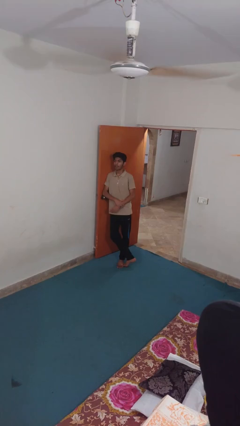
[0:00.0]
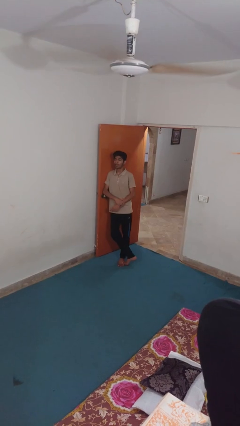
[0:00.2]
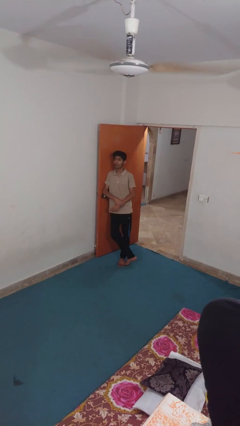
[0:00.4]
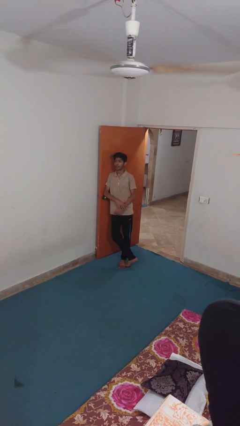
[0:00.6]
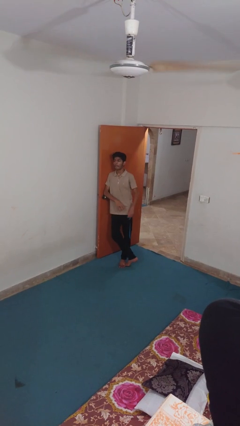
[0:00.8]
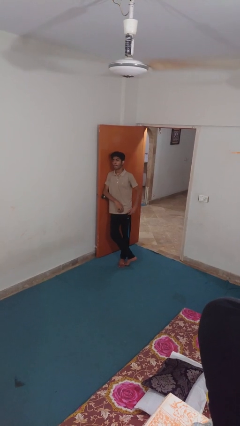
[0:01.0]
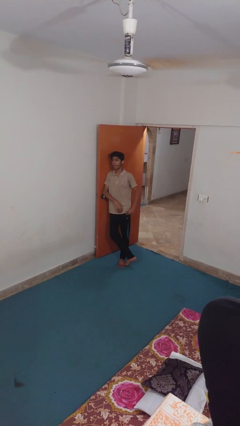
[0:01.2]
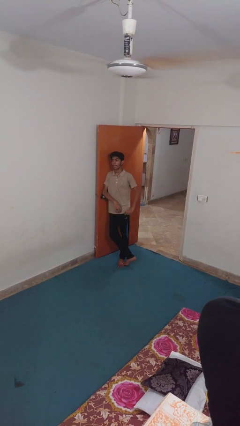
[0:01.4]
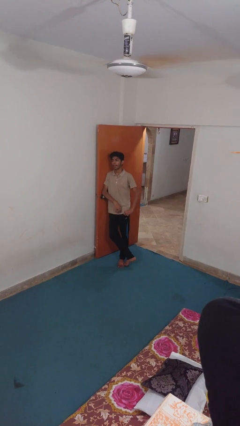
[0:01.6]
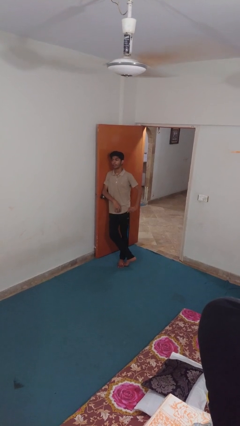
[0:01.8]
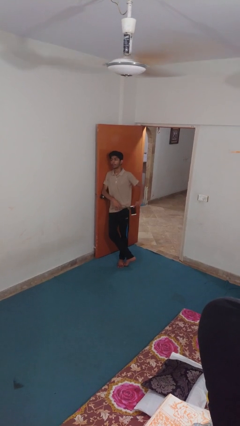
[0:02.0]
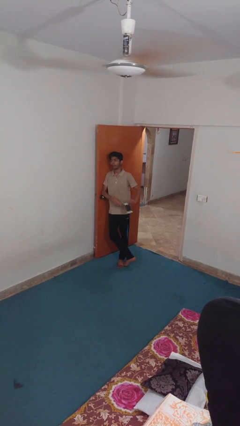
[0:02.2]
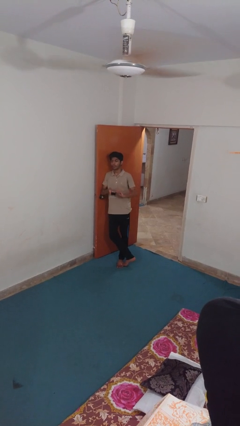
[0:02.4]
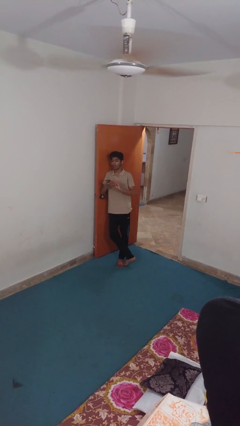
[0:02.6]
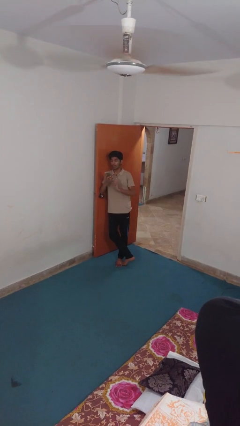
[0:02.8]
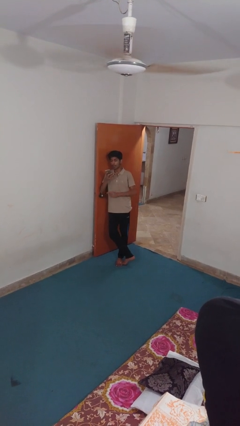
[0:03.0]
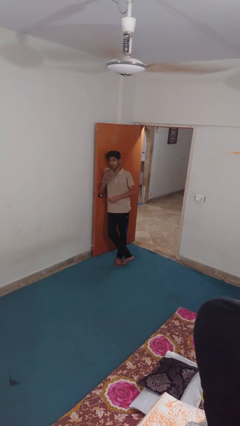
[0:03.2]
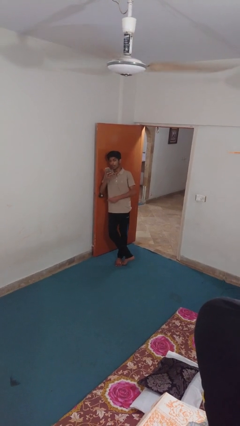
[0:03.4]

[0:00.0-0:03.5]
person takes phone from pocket

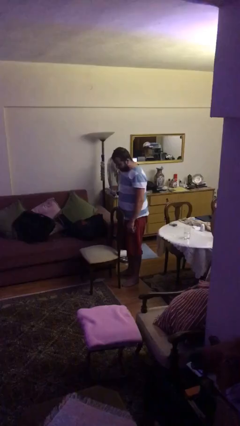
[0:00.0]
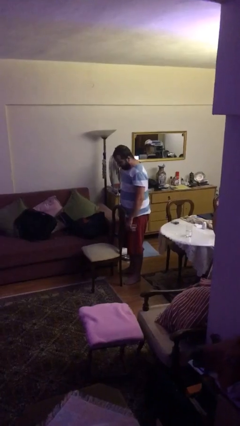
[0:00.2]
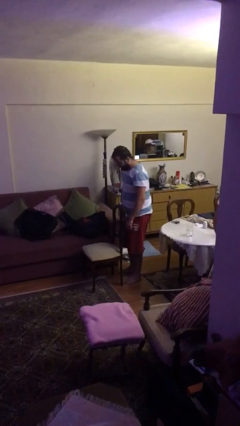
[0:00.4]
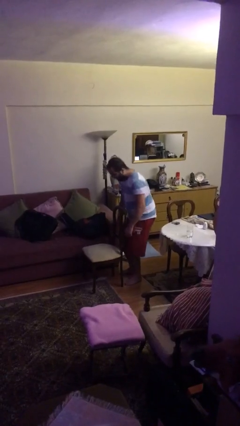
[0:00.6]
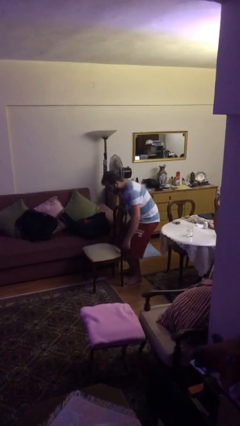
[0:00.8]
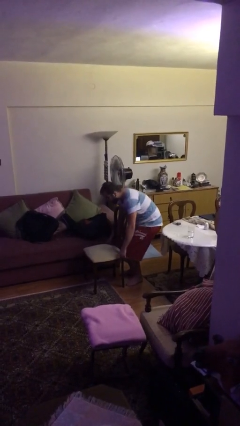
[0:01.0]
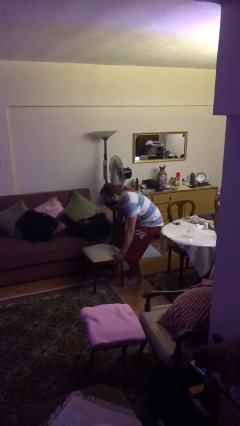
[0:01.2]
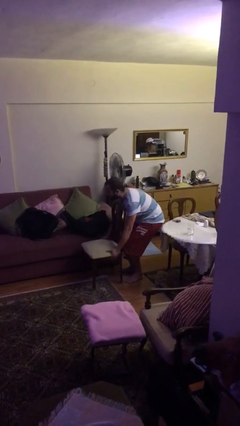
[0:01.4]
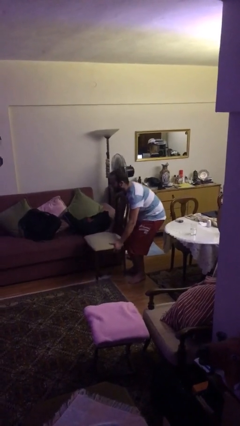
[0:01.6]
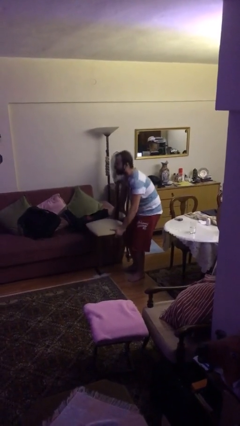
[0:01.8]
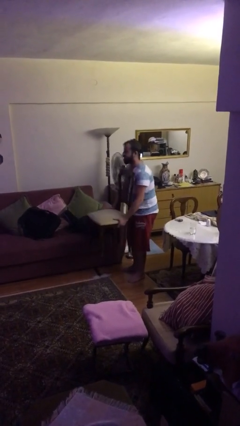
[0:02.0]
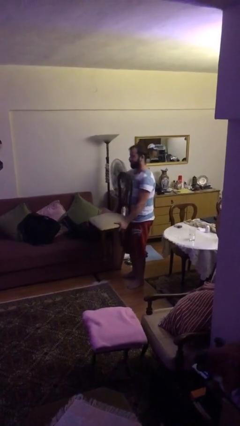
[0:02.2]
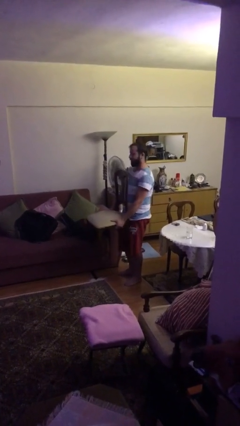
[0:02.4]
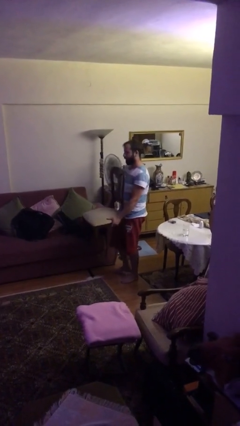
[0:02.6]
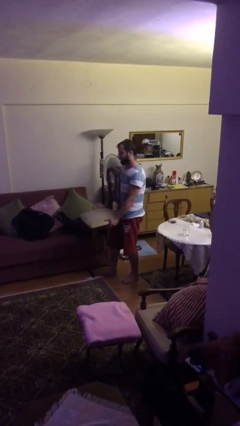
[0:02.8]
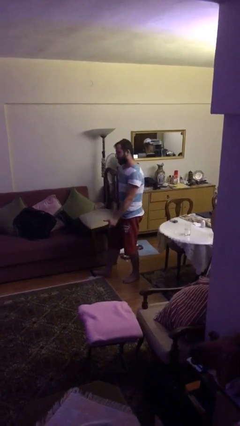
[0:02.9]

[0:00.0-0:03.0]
person picks up object from floor

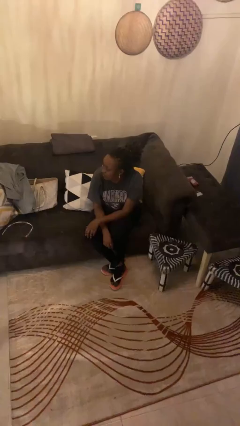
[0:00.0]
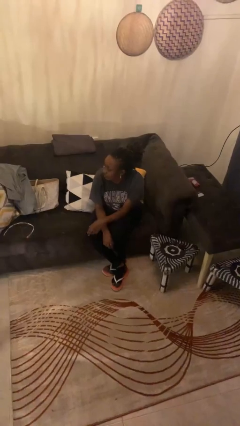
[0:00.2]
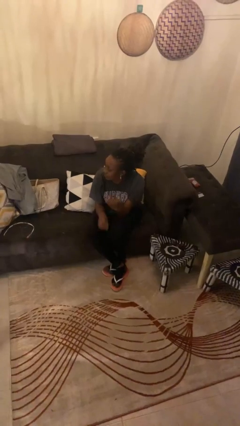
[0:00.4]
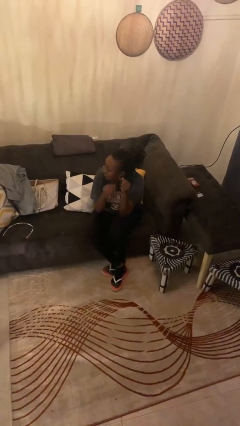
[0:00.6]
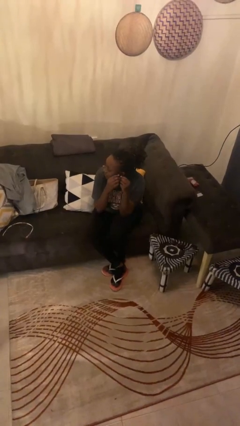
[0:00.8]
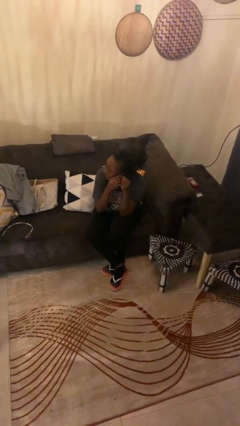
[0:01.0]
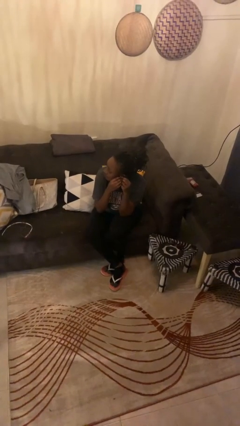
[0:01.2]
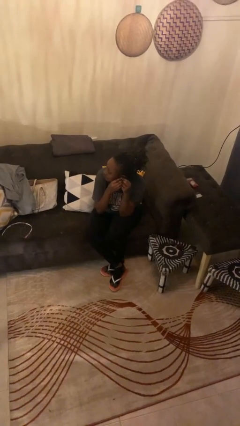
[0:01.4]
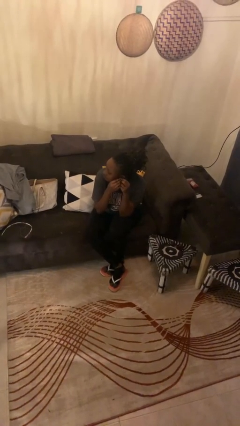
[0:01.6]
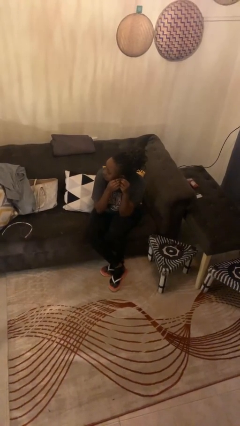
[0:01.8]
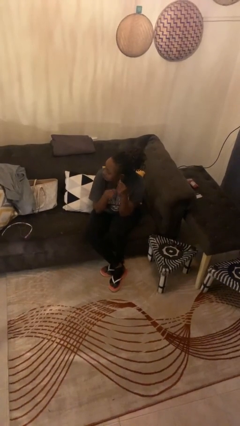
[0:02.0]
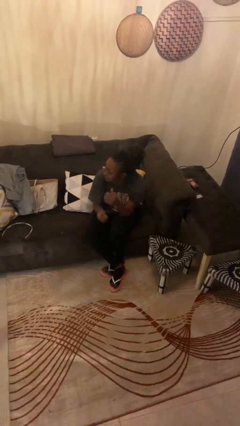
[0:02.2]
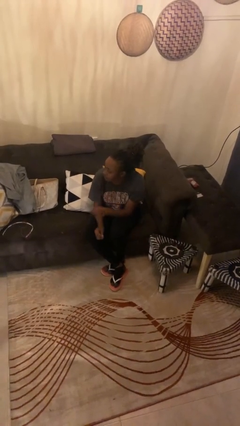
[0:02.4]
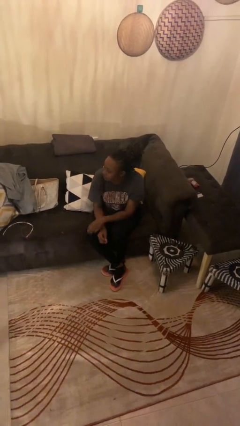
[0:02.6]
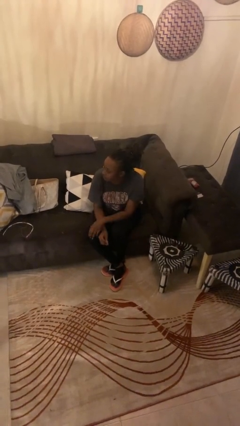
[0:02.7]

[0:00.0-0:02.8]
person takes off earrings

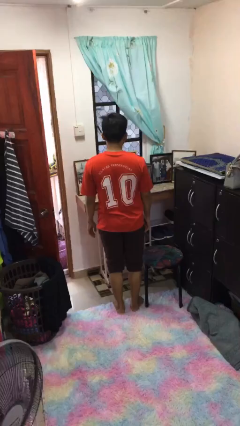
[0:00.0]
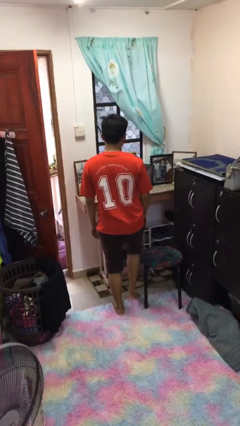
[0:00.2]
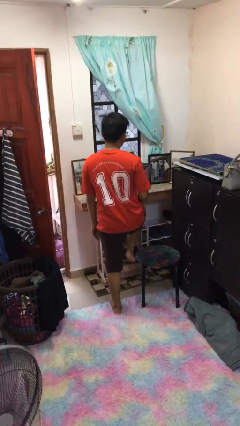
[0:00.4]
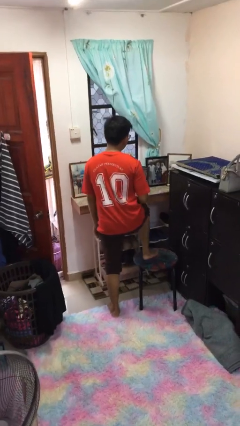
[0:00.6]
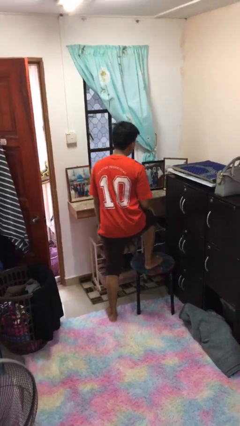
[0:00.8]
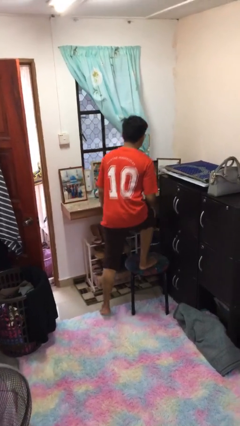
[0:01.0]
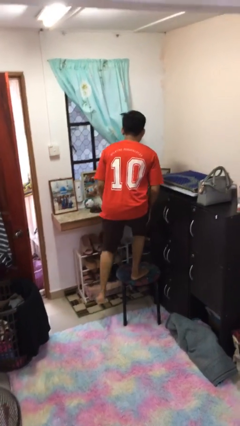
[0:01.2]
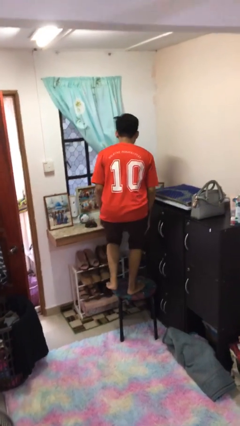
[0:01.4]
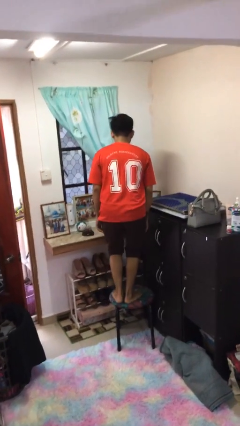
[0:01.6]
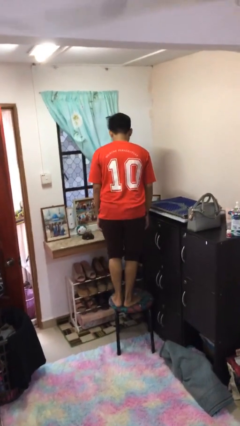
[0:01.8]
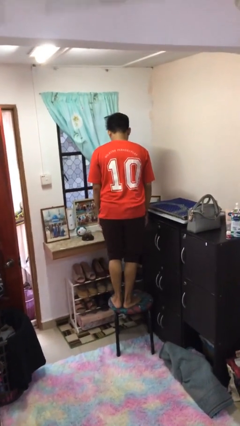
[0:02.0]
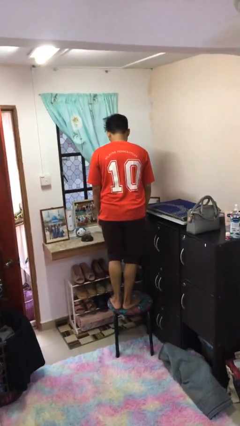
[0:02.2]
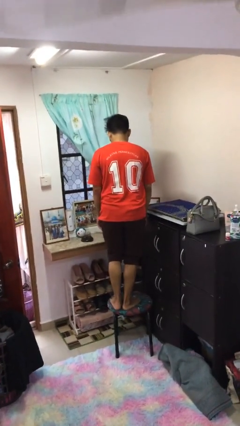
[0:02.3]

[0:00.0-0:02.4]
person climbs on chair

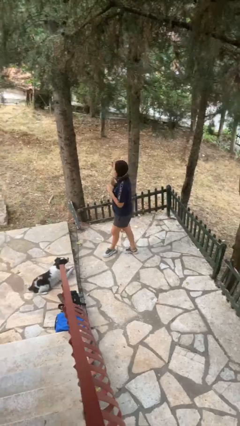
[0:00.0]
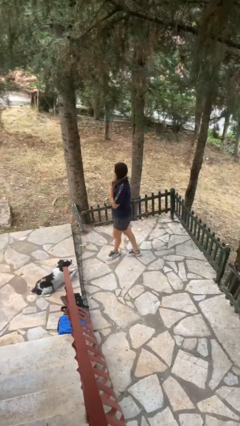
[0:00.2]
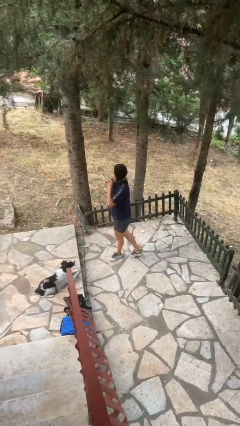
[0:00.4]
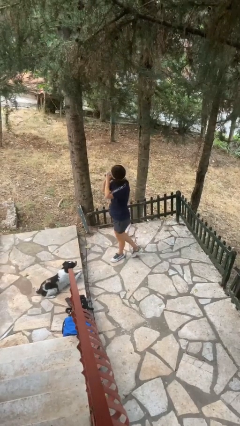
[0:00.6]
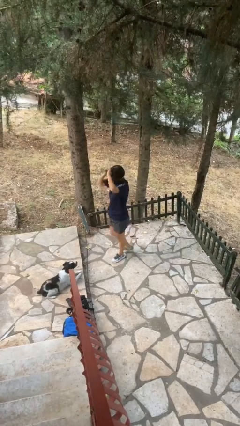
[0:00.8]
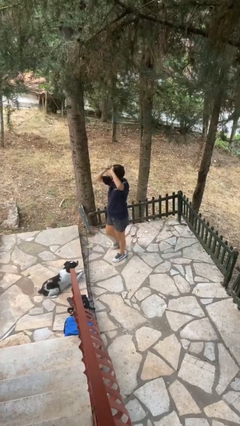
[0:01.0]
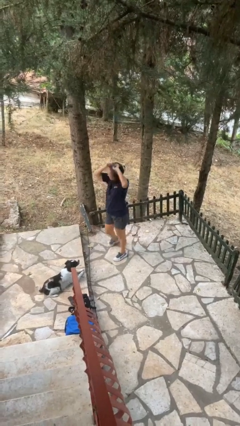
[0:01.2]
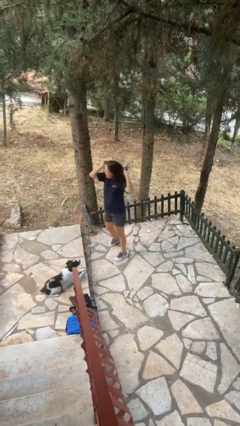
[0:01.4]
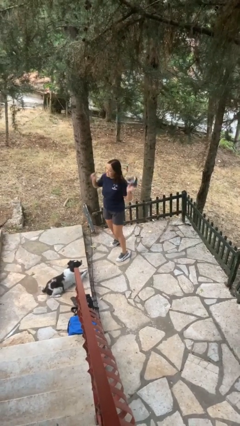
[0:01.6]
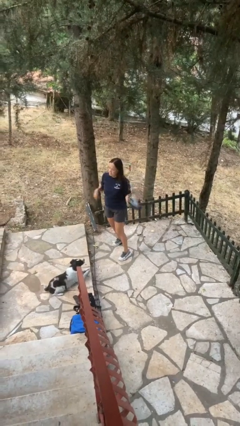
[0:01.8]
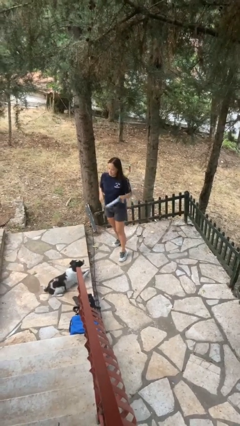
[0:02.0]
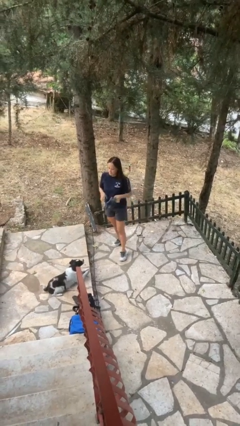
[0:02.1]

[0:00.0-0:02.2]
person takes off scarf

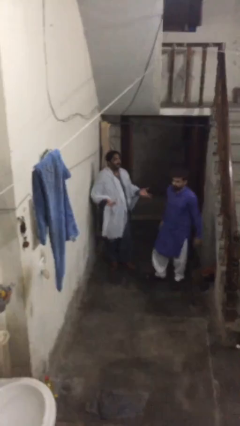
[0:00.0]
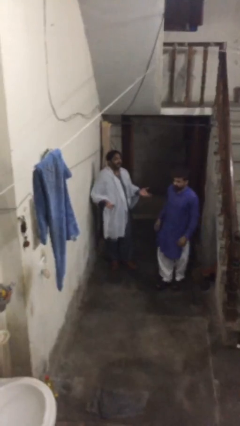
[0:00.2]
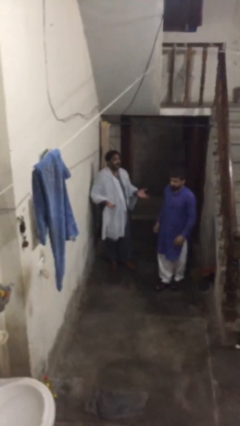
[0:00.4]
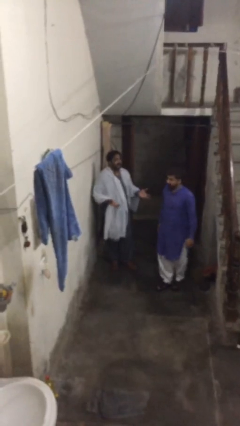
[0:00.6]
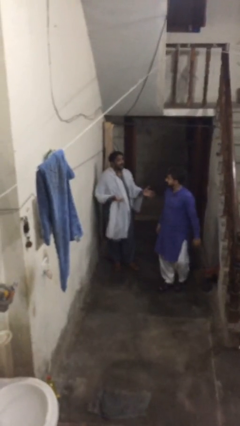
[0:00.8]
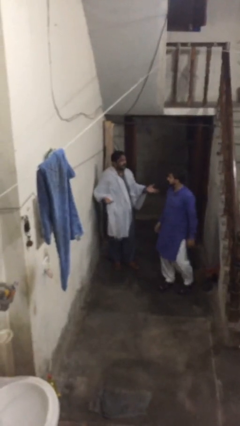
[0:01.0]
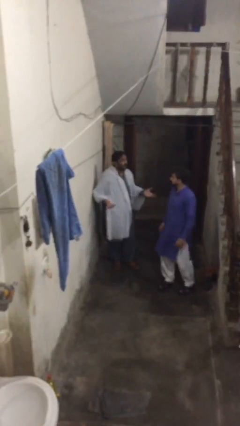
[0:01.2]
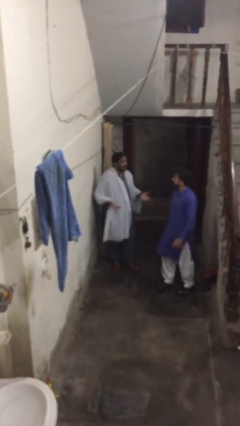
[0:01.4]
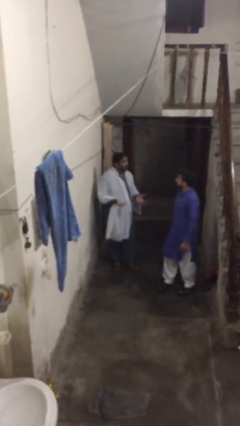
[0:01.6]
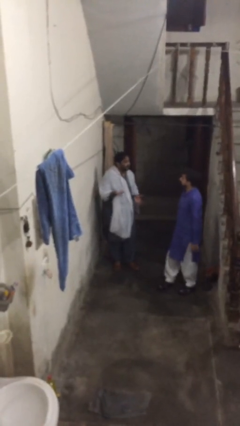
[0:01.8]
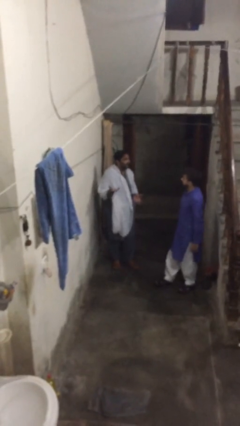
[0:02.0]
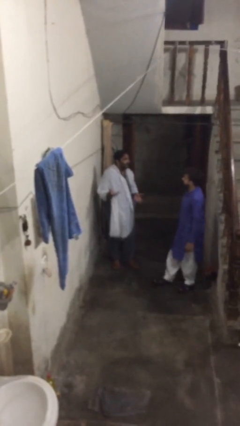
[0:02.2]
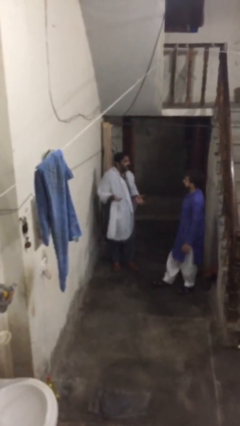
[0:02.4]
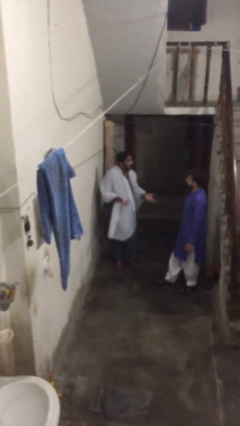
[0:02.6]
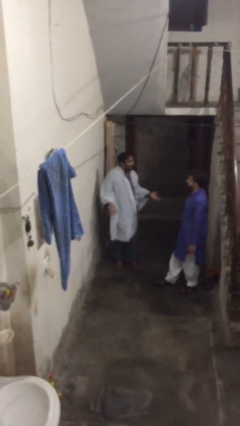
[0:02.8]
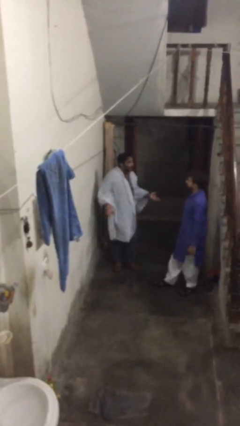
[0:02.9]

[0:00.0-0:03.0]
person talks to person

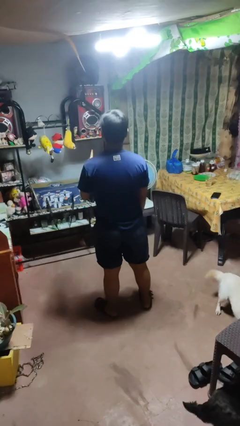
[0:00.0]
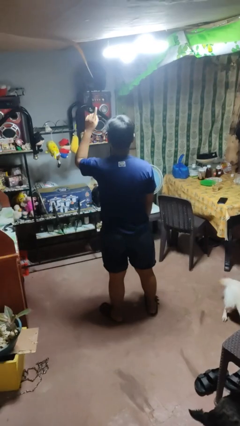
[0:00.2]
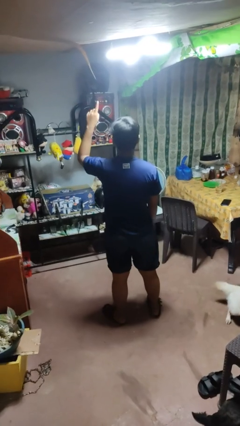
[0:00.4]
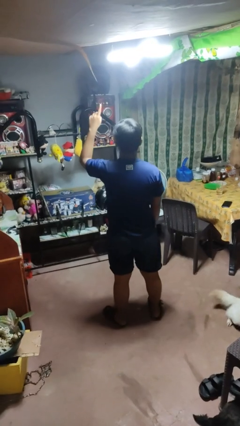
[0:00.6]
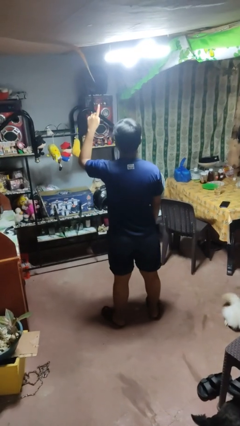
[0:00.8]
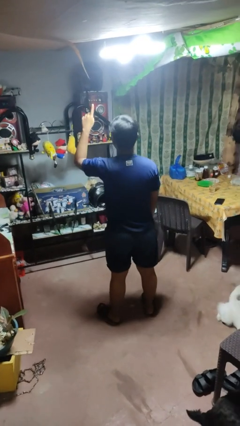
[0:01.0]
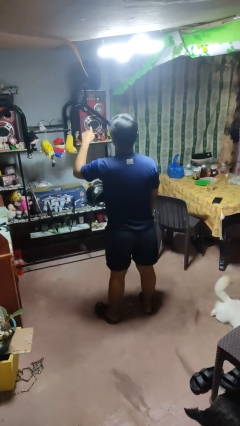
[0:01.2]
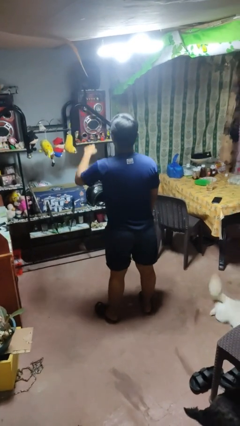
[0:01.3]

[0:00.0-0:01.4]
person gestures number one
